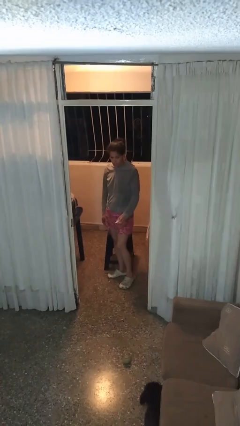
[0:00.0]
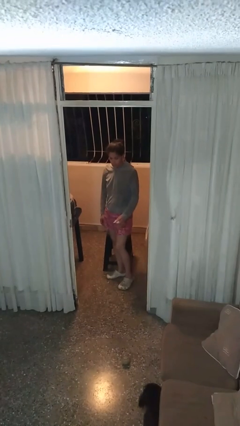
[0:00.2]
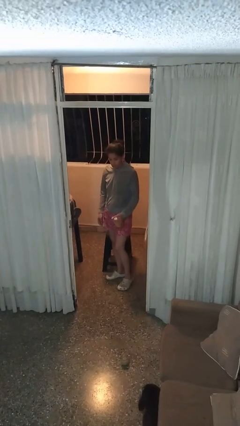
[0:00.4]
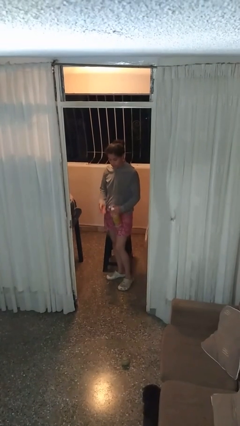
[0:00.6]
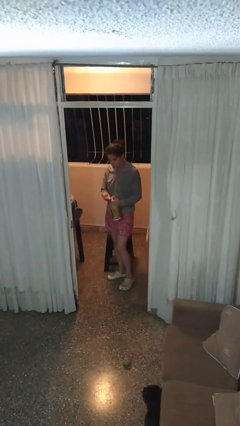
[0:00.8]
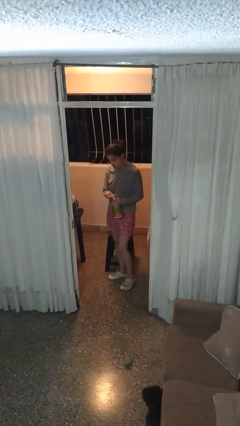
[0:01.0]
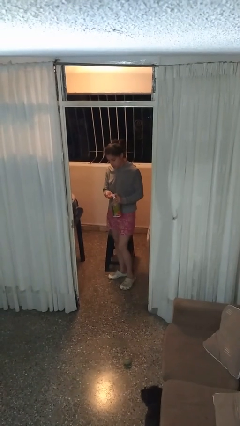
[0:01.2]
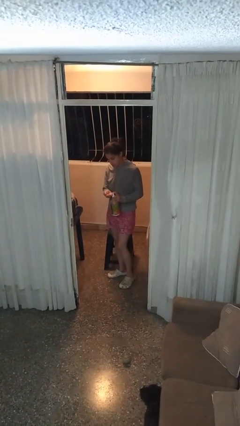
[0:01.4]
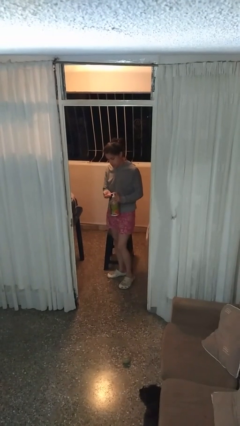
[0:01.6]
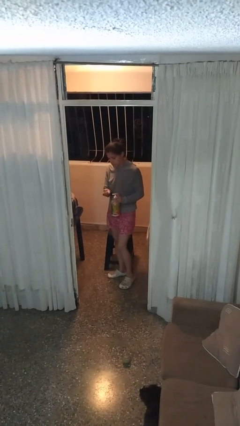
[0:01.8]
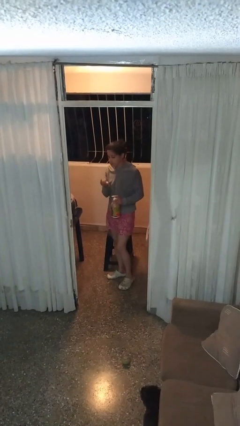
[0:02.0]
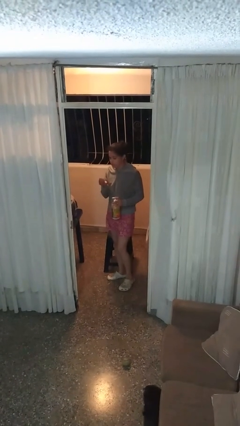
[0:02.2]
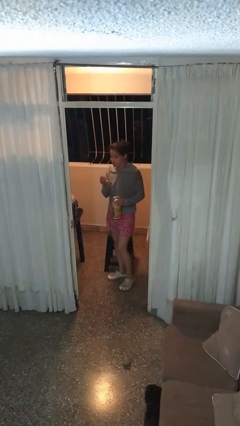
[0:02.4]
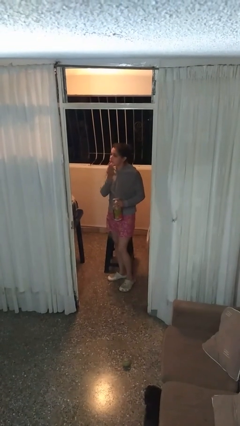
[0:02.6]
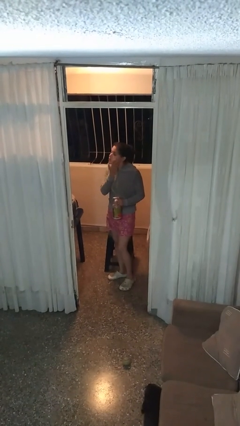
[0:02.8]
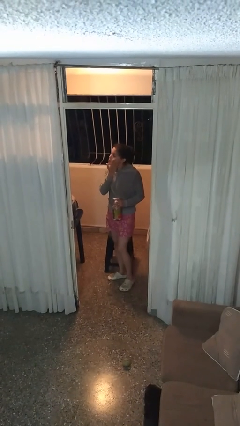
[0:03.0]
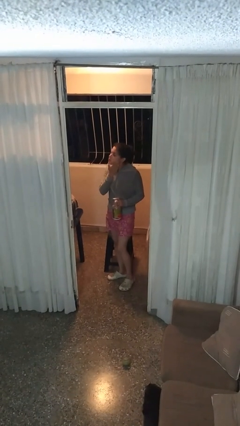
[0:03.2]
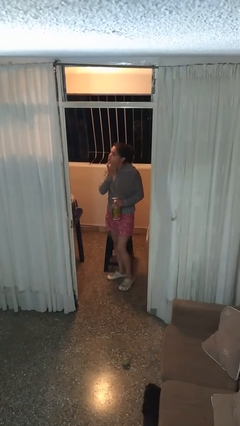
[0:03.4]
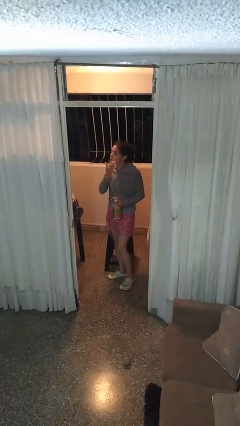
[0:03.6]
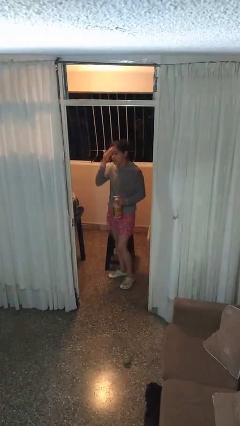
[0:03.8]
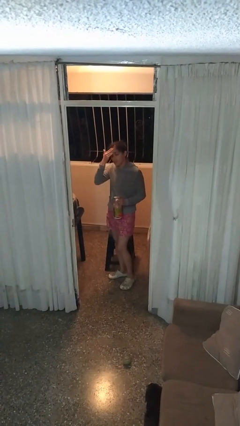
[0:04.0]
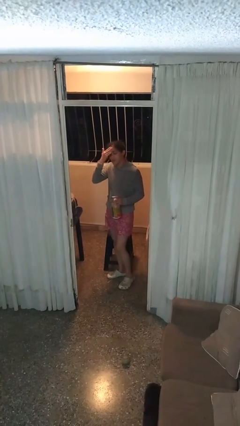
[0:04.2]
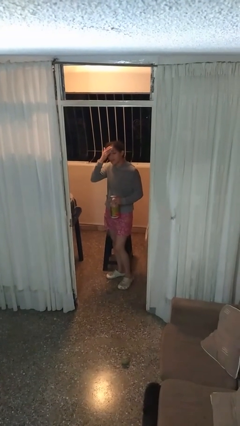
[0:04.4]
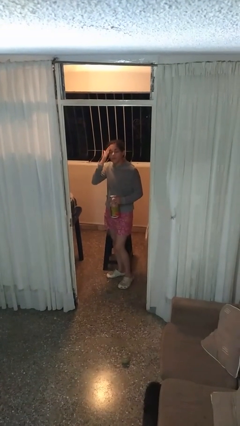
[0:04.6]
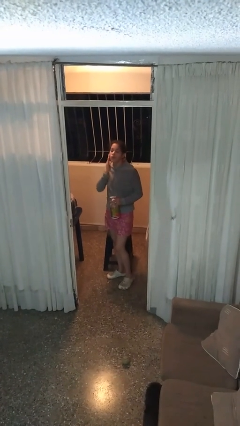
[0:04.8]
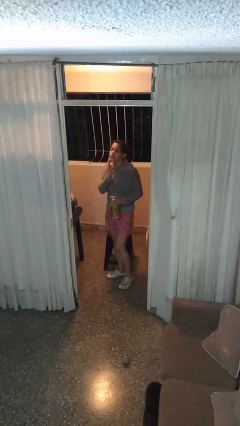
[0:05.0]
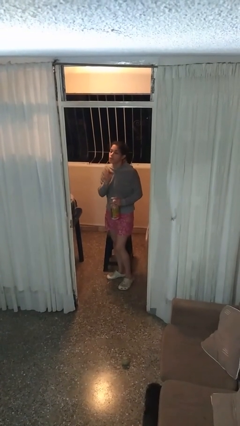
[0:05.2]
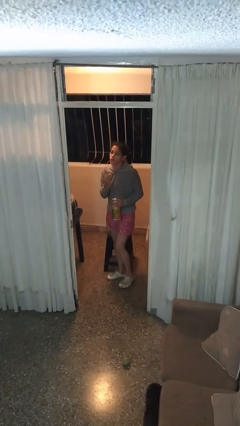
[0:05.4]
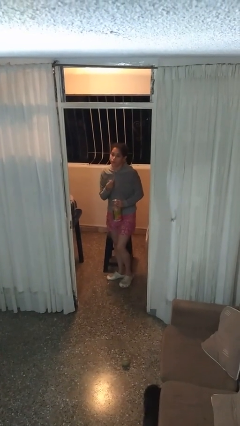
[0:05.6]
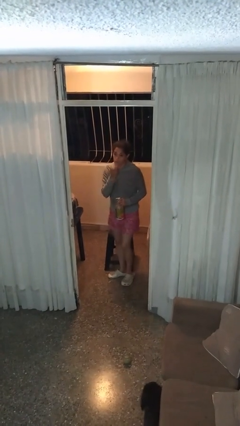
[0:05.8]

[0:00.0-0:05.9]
person applies facial moisturizer

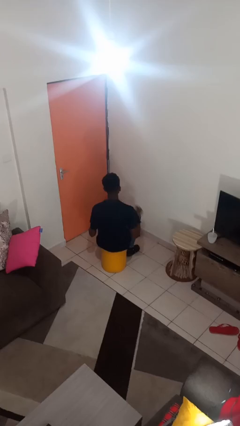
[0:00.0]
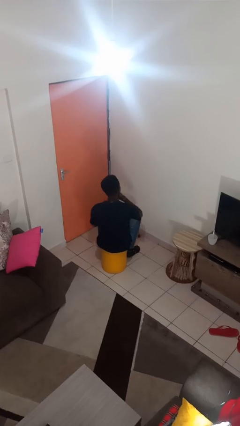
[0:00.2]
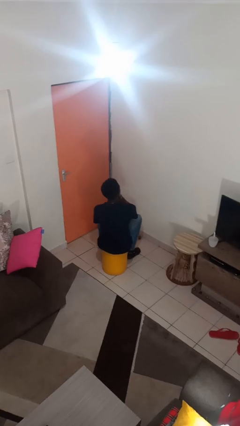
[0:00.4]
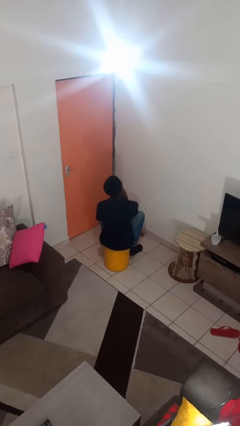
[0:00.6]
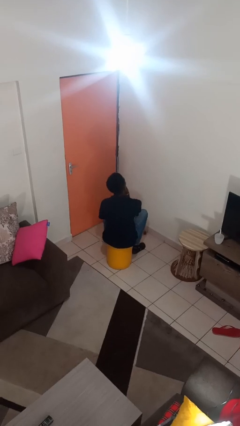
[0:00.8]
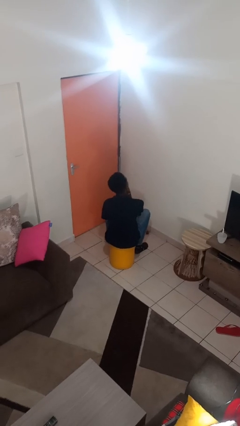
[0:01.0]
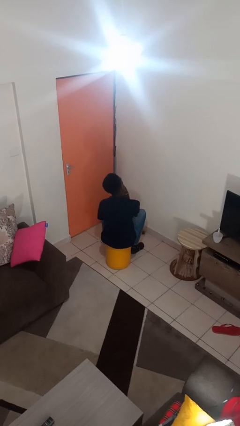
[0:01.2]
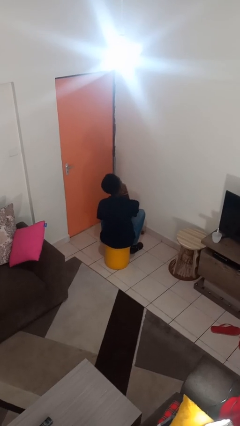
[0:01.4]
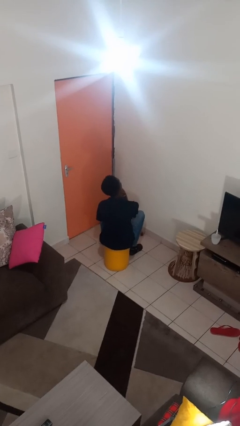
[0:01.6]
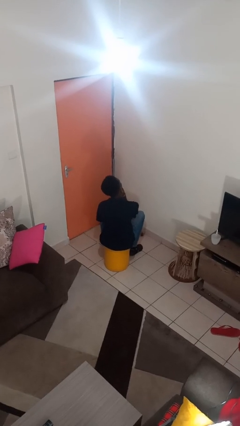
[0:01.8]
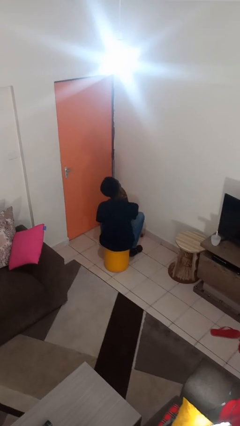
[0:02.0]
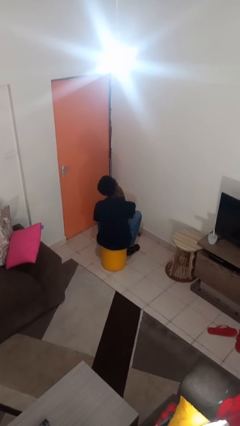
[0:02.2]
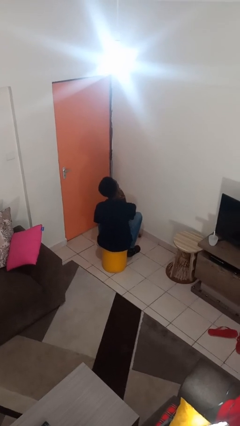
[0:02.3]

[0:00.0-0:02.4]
person strokes chin

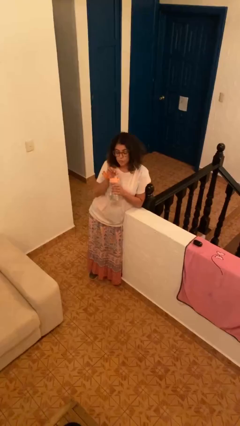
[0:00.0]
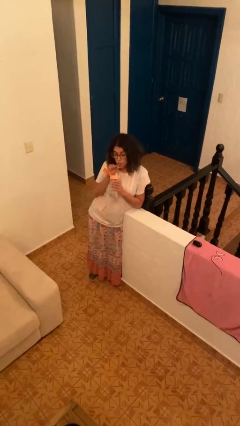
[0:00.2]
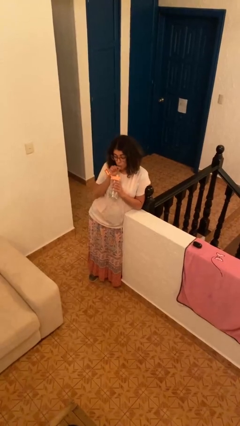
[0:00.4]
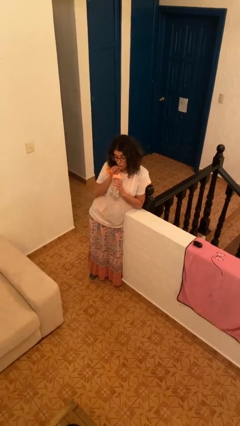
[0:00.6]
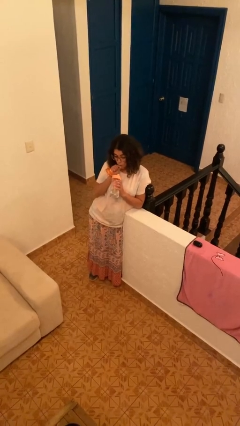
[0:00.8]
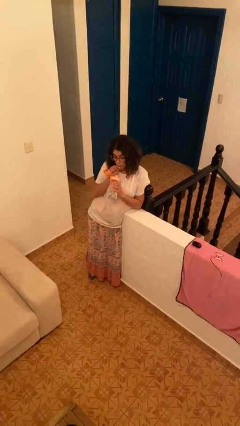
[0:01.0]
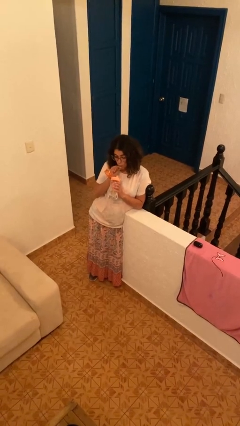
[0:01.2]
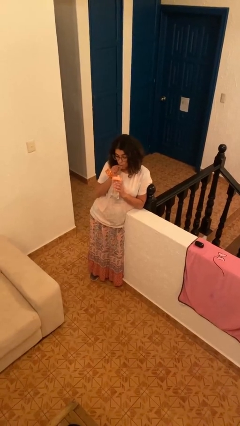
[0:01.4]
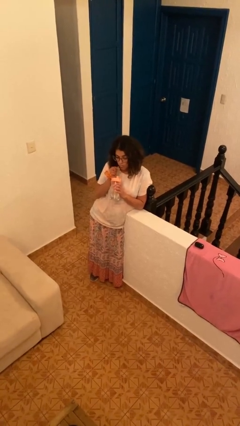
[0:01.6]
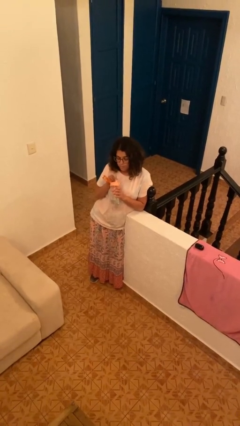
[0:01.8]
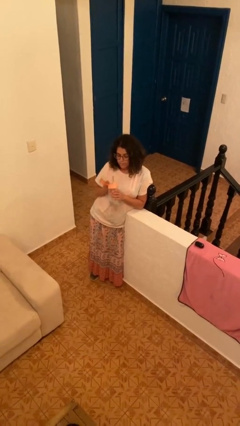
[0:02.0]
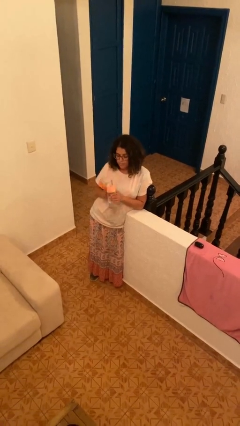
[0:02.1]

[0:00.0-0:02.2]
person drinks from straw

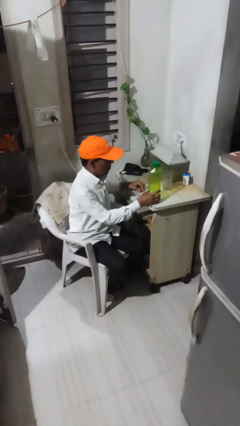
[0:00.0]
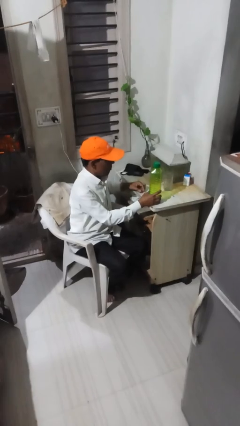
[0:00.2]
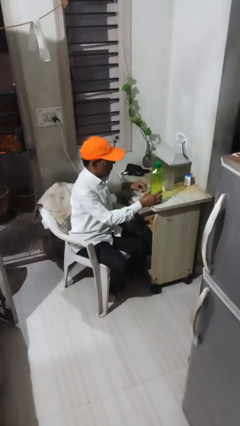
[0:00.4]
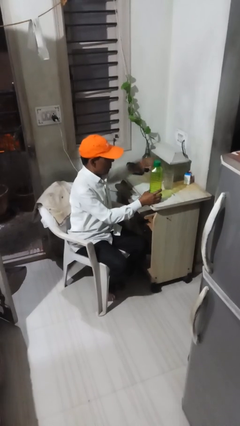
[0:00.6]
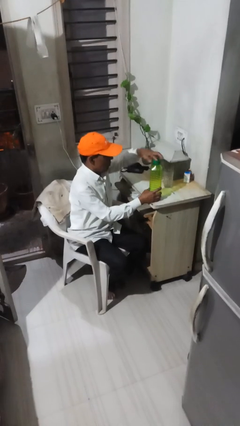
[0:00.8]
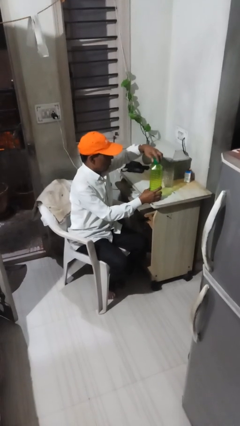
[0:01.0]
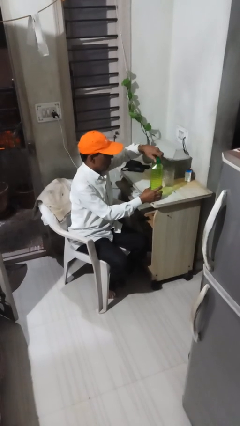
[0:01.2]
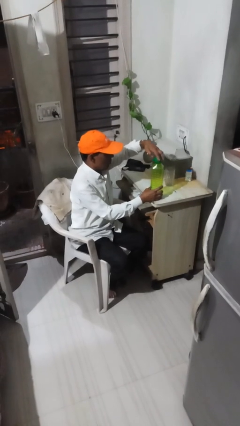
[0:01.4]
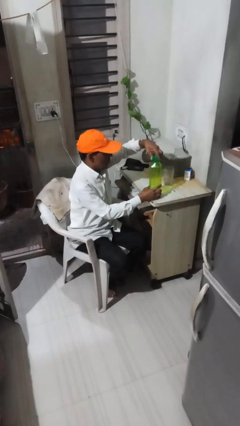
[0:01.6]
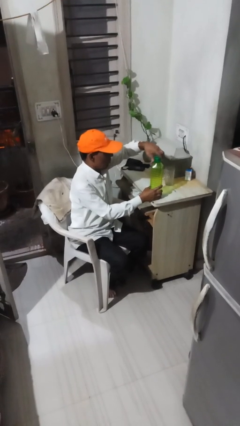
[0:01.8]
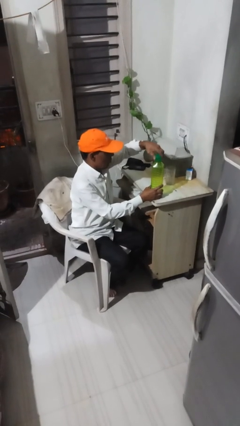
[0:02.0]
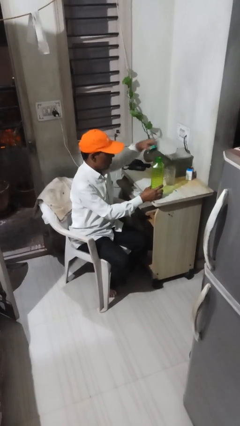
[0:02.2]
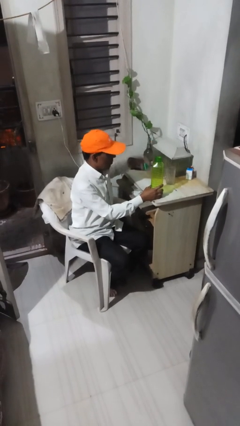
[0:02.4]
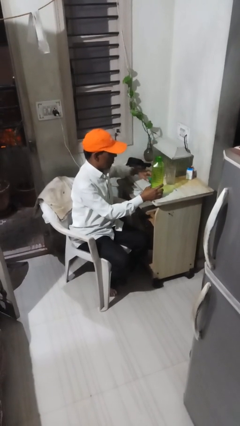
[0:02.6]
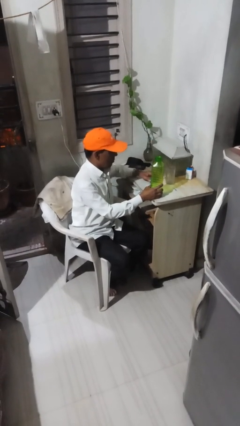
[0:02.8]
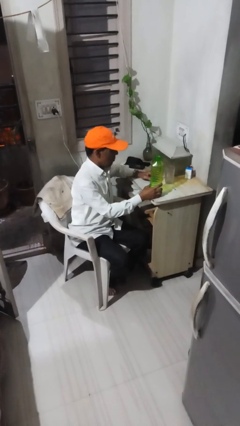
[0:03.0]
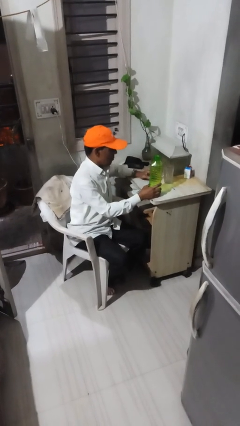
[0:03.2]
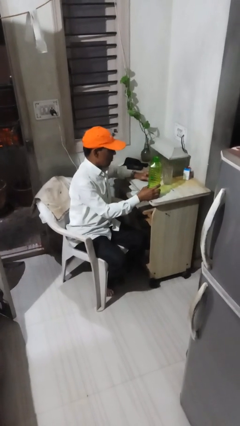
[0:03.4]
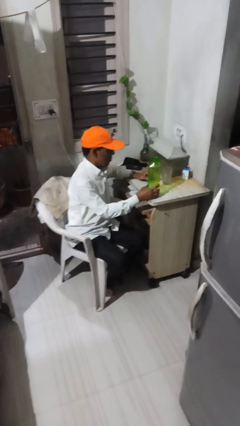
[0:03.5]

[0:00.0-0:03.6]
person unscrews lid from bottle

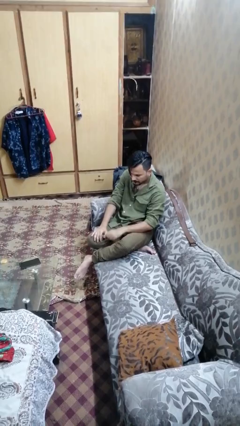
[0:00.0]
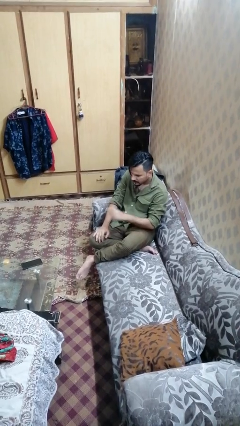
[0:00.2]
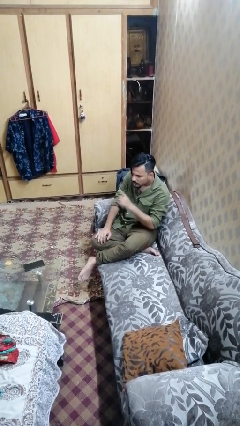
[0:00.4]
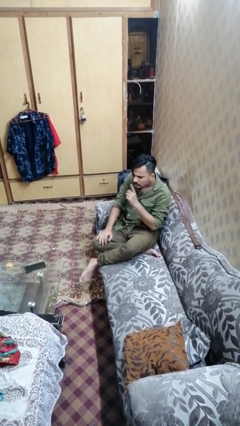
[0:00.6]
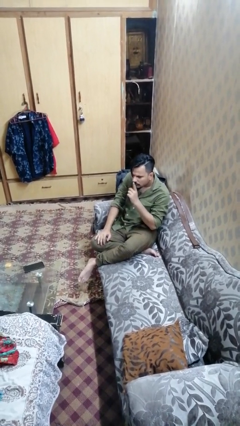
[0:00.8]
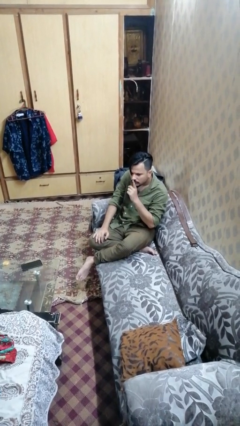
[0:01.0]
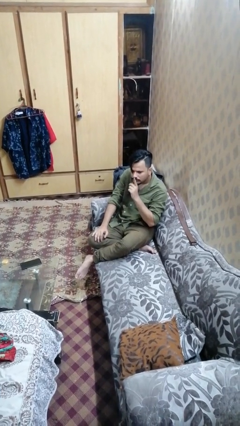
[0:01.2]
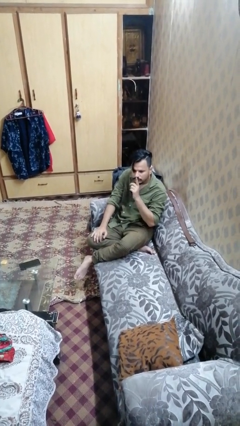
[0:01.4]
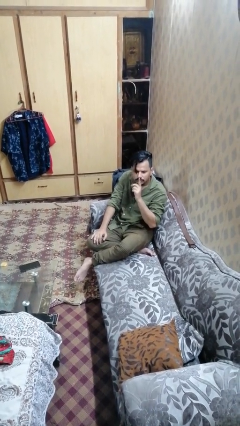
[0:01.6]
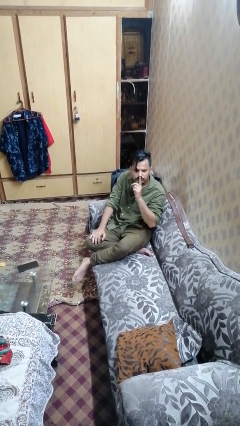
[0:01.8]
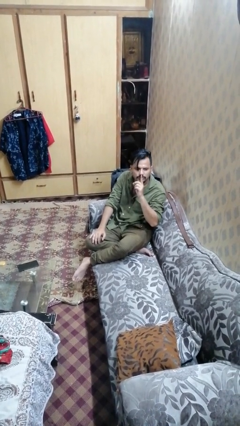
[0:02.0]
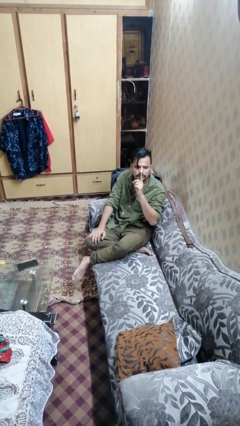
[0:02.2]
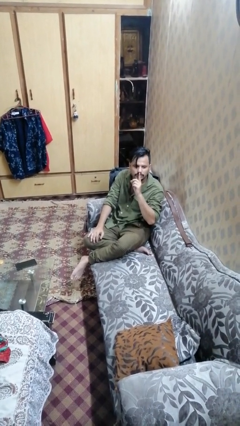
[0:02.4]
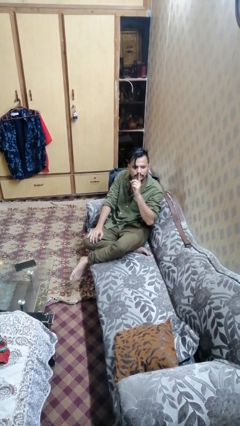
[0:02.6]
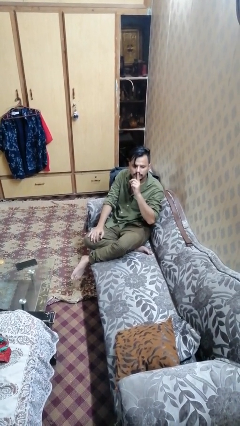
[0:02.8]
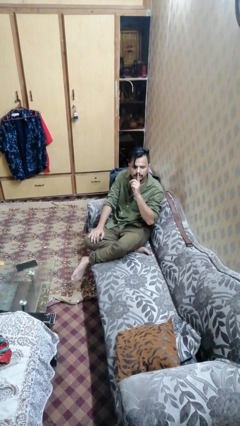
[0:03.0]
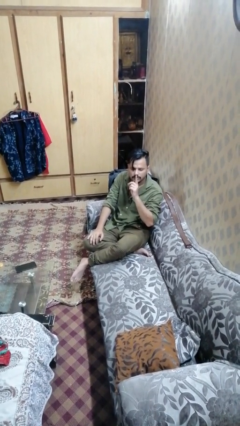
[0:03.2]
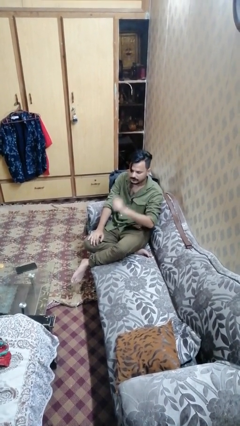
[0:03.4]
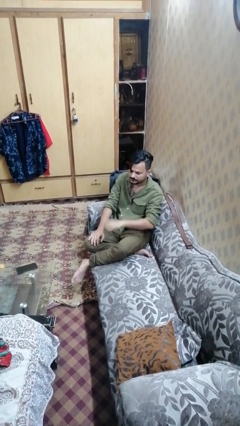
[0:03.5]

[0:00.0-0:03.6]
person gestures be quiet

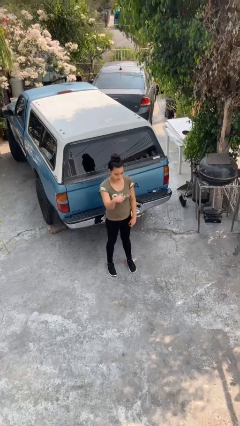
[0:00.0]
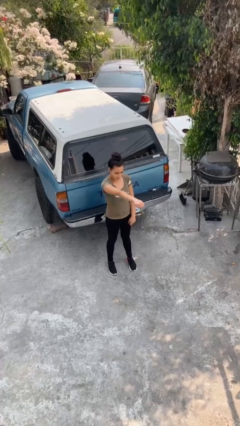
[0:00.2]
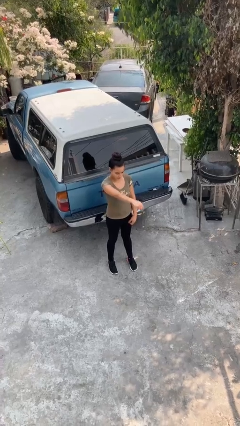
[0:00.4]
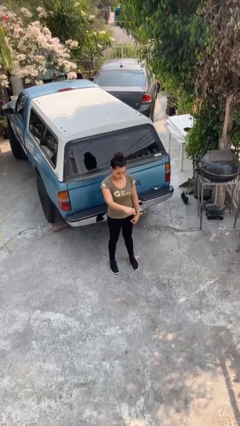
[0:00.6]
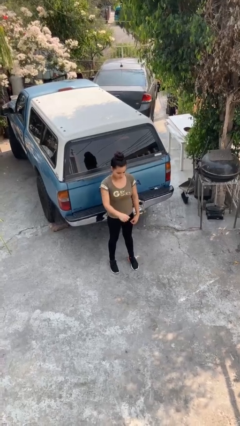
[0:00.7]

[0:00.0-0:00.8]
person punches
